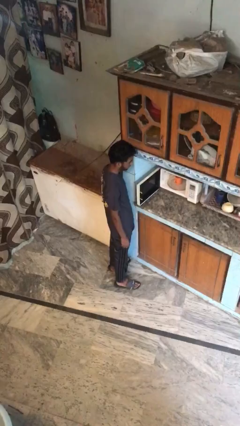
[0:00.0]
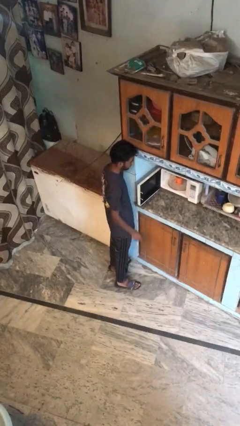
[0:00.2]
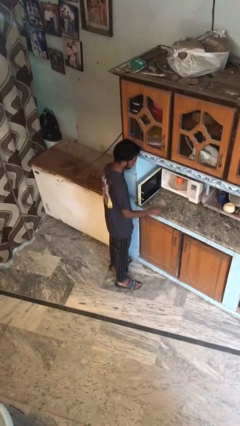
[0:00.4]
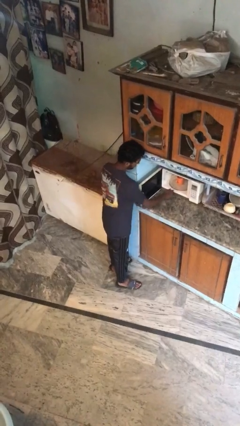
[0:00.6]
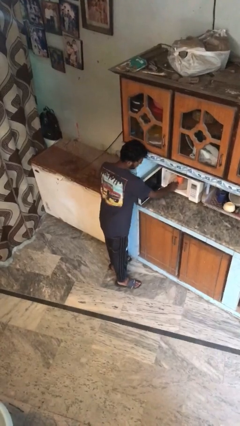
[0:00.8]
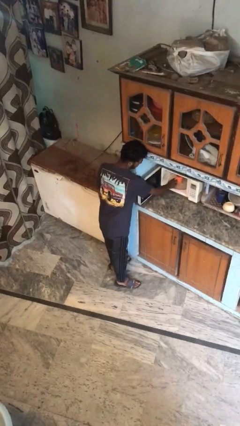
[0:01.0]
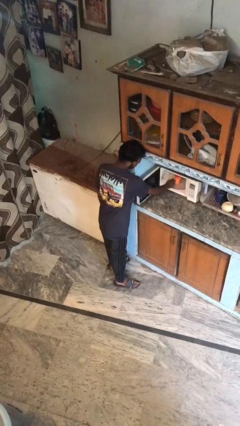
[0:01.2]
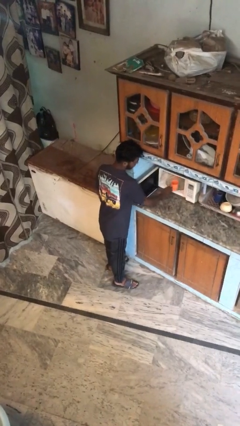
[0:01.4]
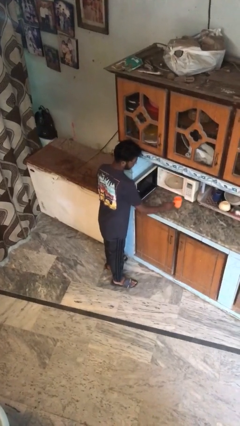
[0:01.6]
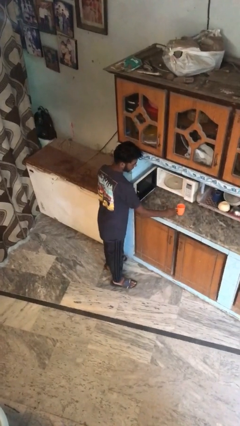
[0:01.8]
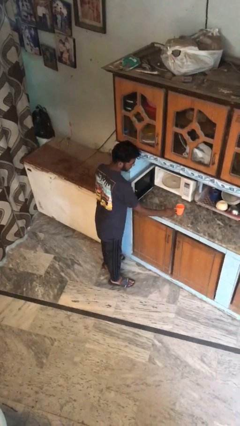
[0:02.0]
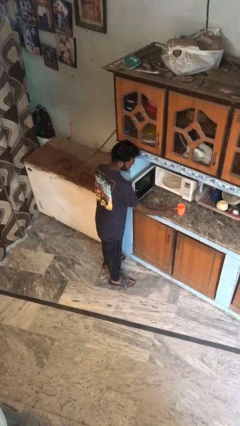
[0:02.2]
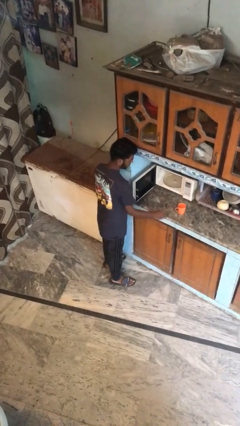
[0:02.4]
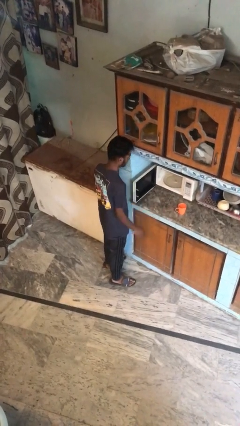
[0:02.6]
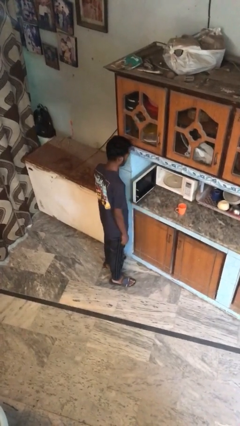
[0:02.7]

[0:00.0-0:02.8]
person takes object from microwave

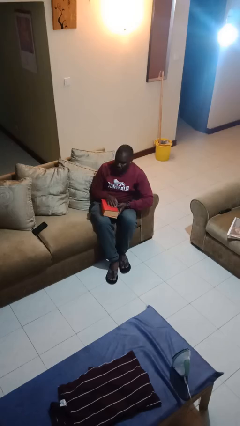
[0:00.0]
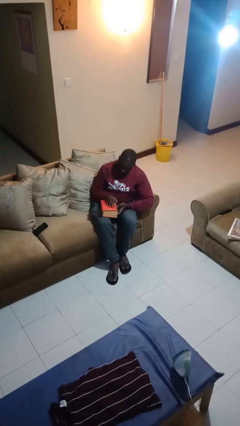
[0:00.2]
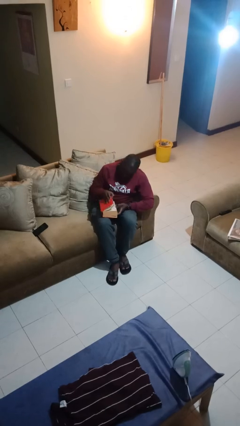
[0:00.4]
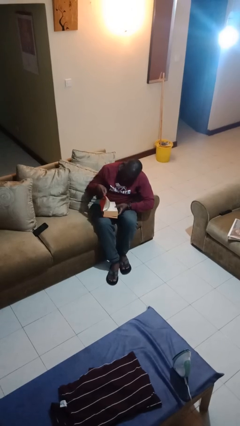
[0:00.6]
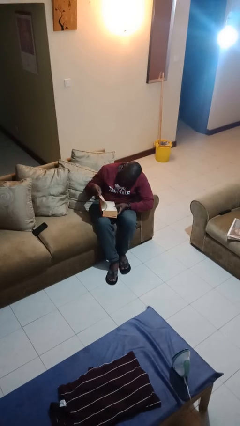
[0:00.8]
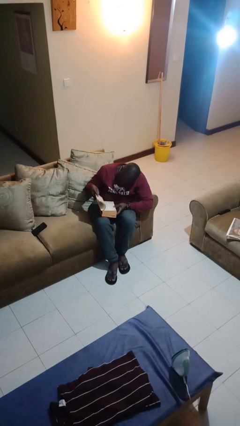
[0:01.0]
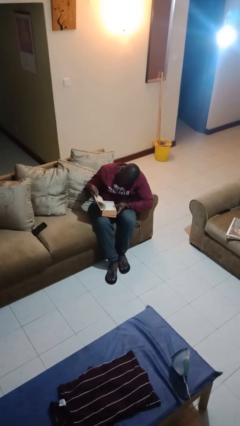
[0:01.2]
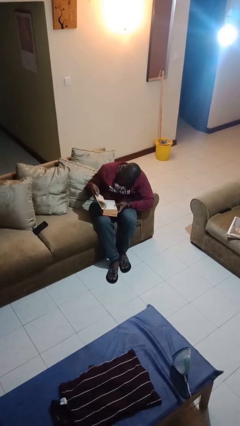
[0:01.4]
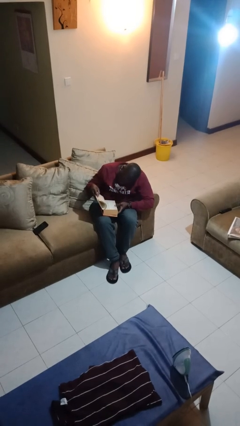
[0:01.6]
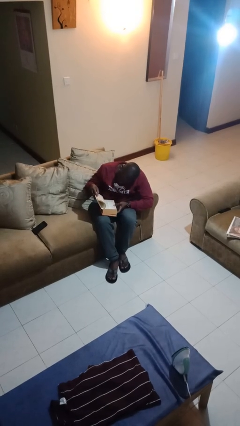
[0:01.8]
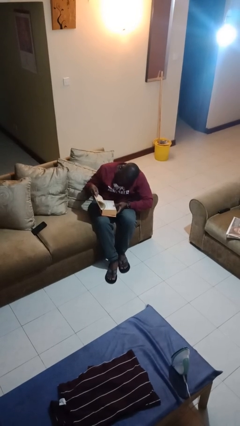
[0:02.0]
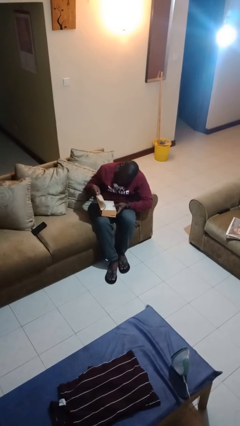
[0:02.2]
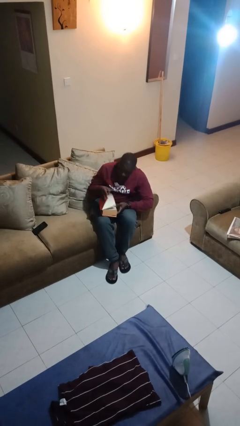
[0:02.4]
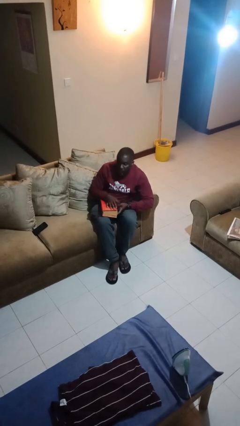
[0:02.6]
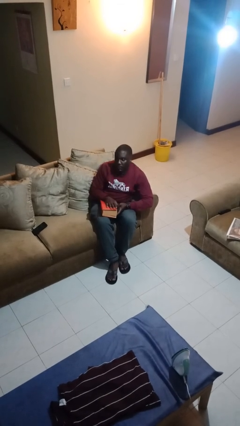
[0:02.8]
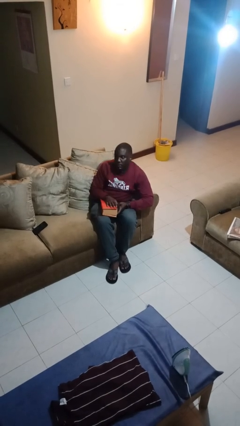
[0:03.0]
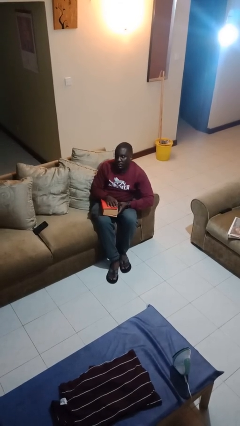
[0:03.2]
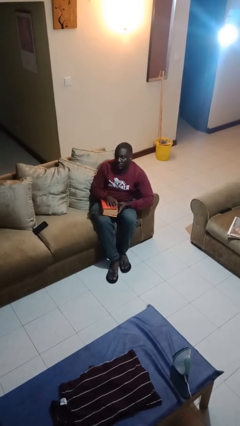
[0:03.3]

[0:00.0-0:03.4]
person reads book

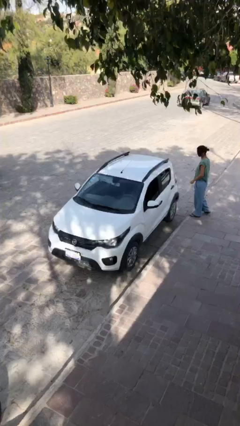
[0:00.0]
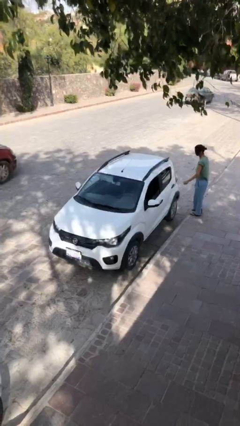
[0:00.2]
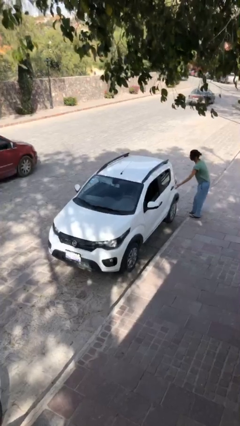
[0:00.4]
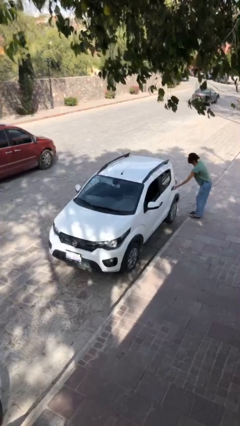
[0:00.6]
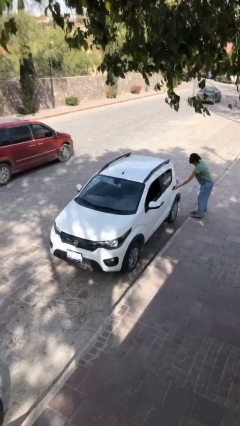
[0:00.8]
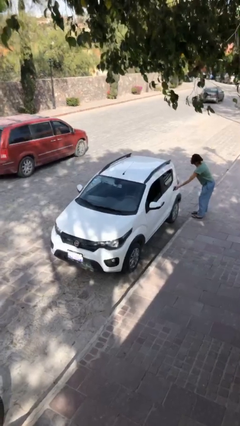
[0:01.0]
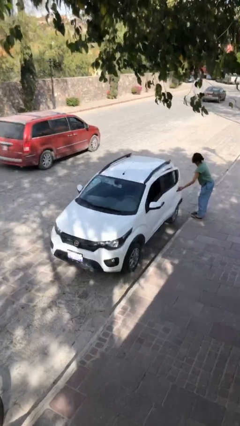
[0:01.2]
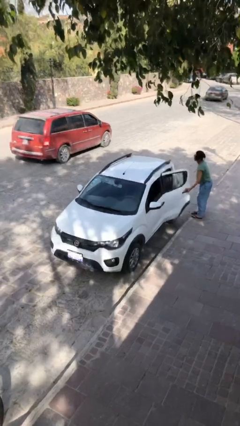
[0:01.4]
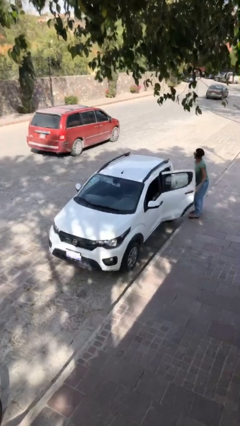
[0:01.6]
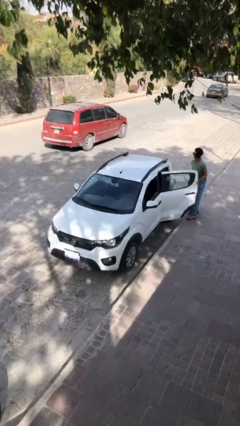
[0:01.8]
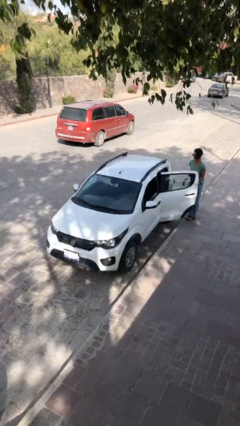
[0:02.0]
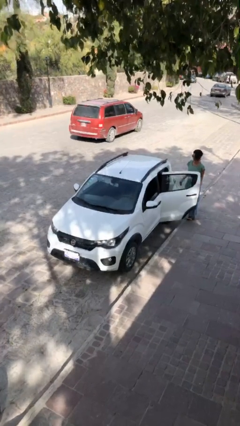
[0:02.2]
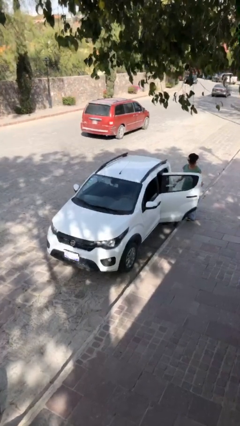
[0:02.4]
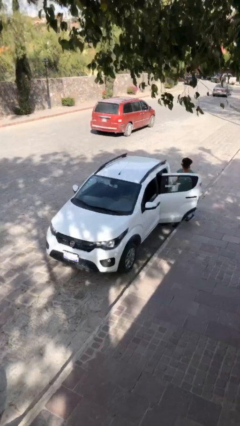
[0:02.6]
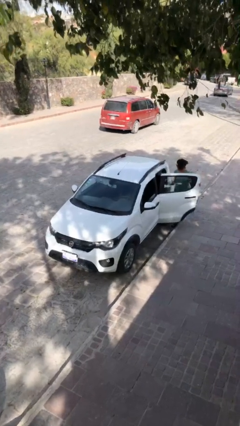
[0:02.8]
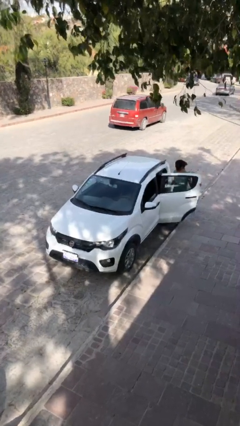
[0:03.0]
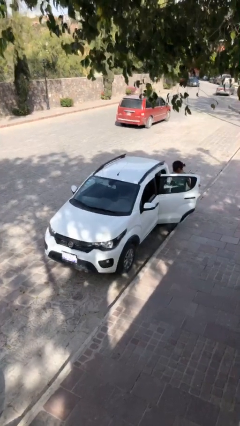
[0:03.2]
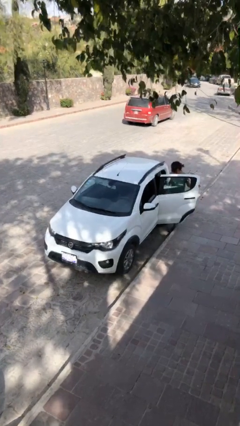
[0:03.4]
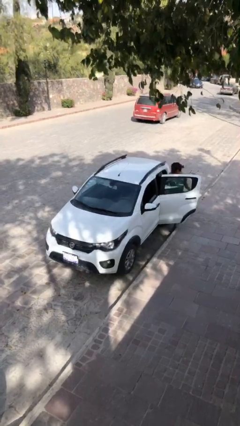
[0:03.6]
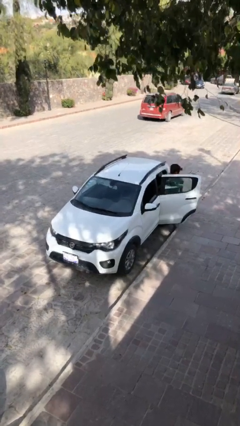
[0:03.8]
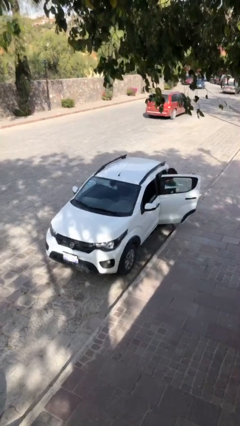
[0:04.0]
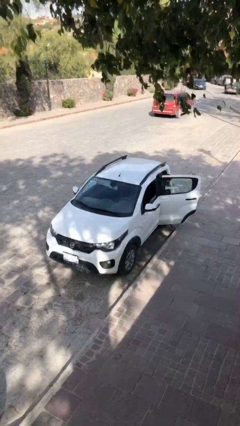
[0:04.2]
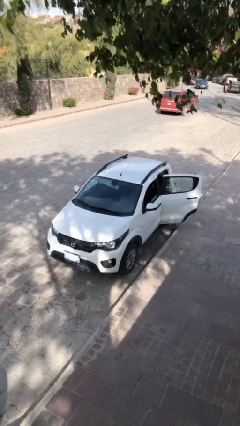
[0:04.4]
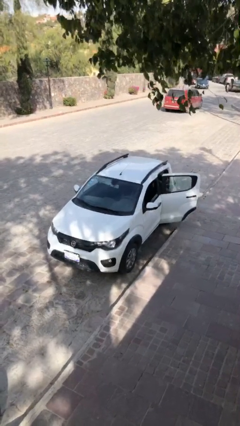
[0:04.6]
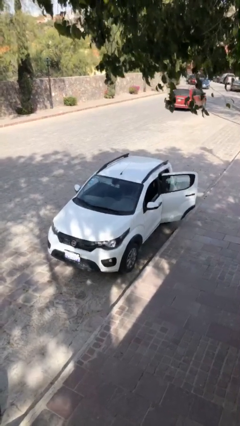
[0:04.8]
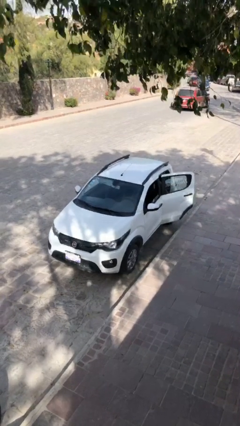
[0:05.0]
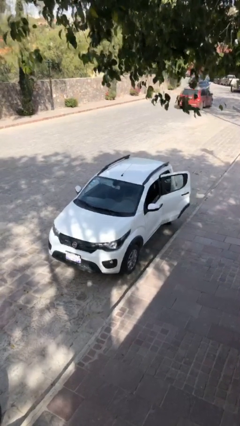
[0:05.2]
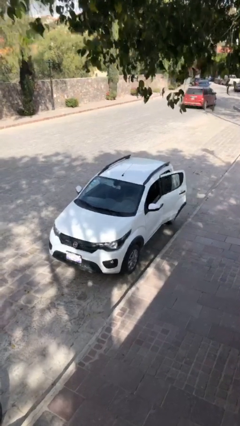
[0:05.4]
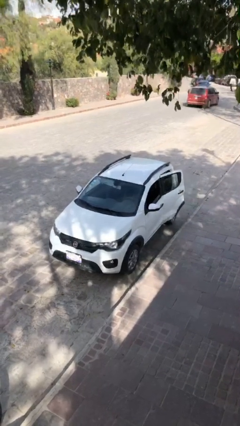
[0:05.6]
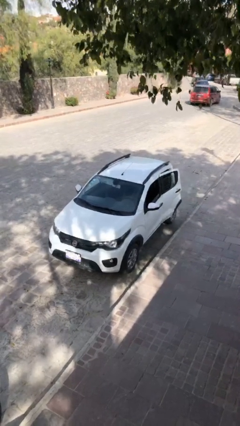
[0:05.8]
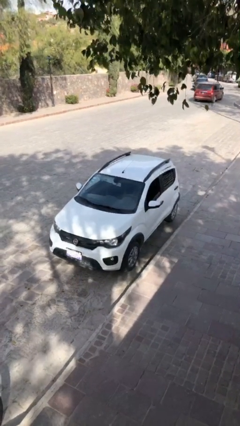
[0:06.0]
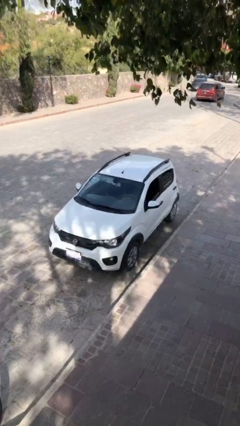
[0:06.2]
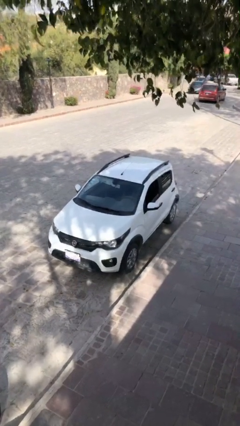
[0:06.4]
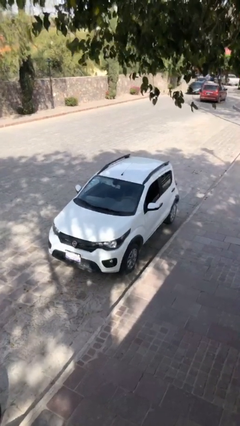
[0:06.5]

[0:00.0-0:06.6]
car picks up person

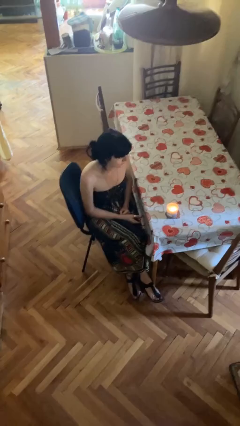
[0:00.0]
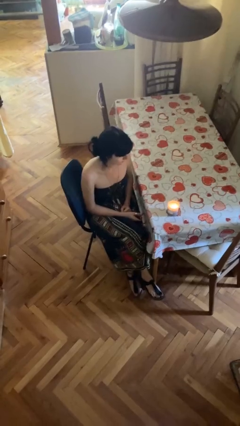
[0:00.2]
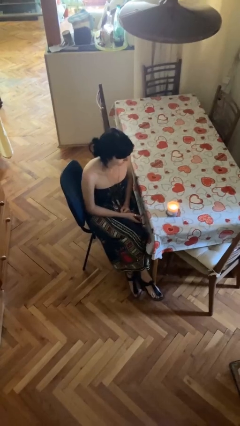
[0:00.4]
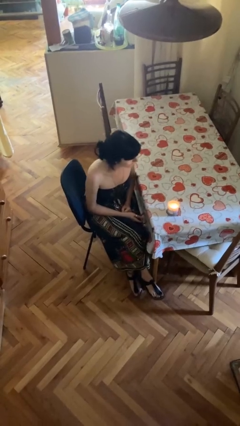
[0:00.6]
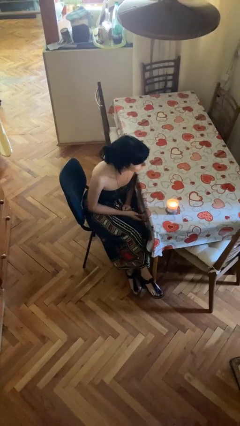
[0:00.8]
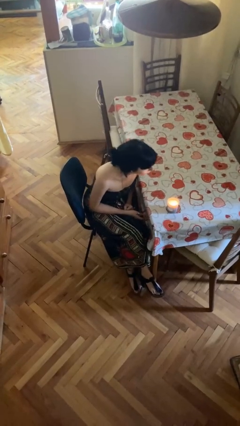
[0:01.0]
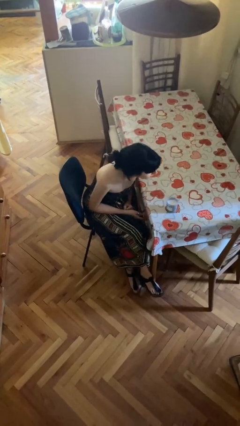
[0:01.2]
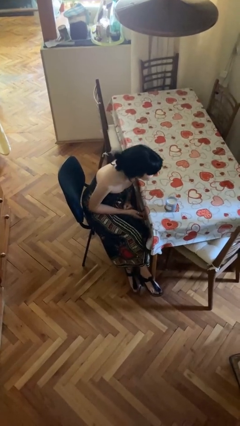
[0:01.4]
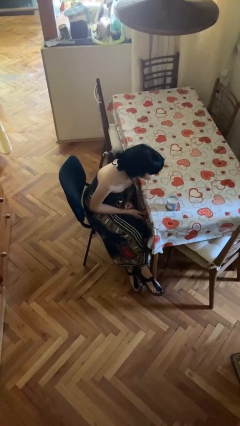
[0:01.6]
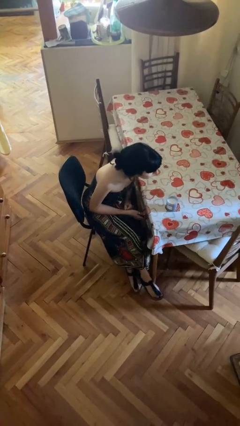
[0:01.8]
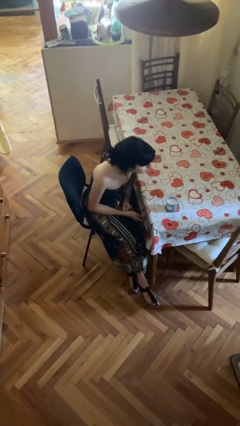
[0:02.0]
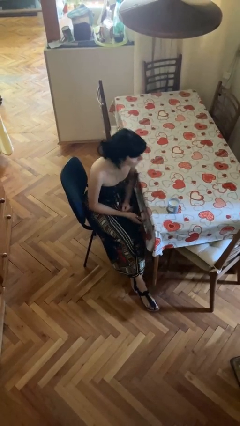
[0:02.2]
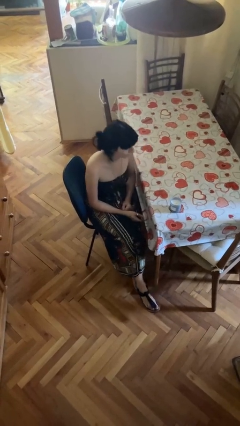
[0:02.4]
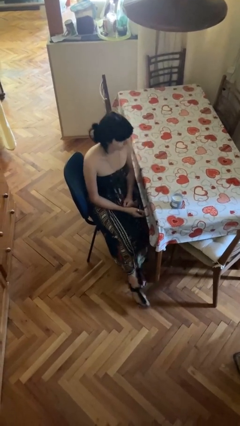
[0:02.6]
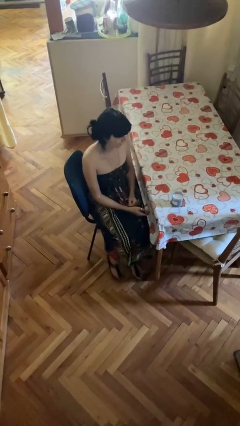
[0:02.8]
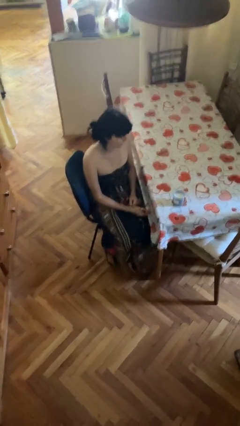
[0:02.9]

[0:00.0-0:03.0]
person extinguishes candle

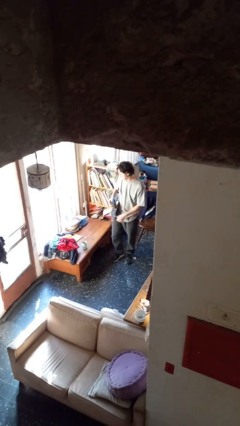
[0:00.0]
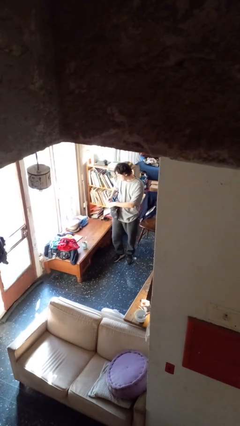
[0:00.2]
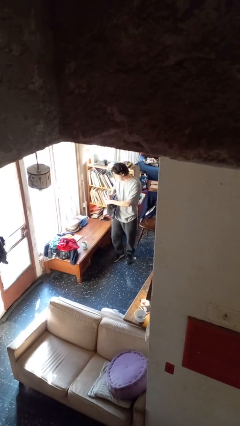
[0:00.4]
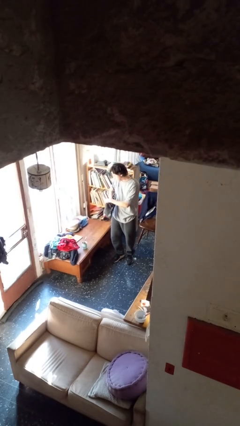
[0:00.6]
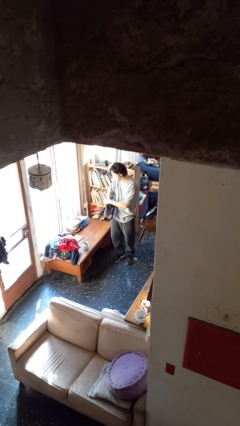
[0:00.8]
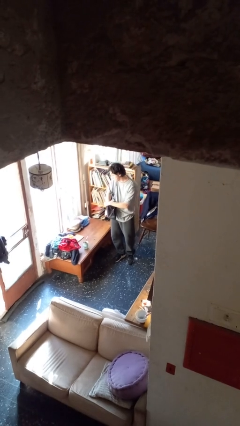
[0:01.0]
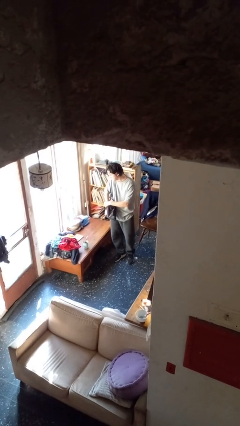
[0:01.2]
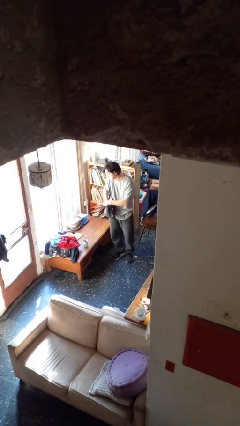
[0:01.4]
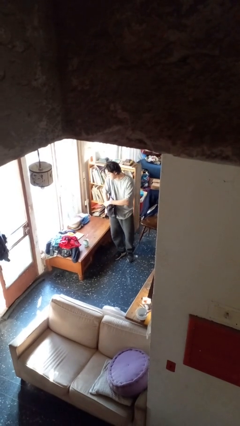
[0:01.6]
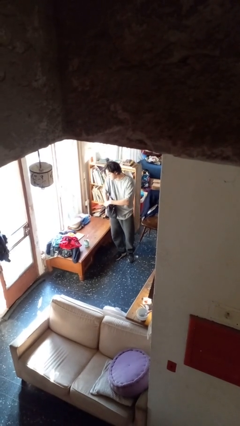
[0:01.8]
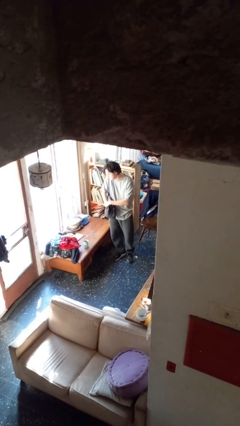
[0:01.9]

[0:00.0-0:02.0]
person searches in purse
